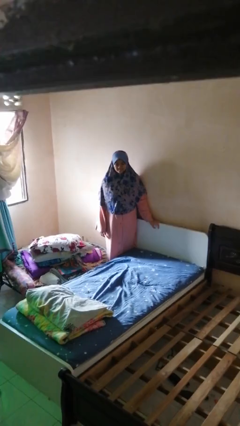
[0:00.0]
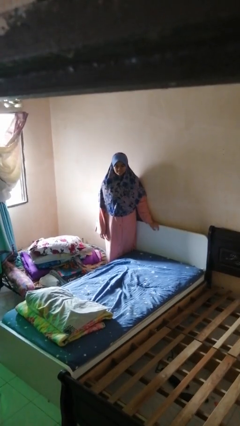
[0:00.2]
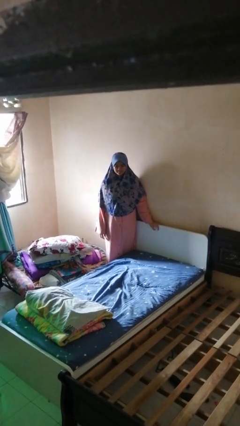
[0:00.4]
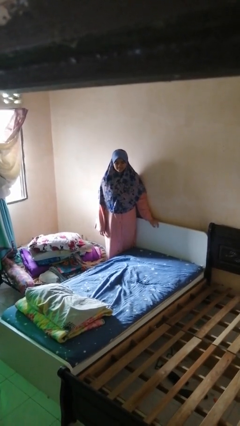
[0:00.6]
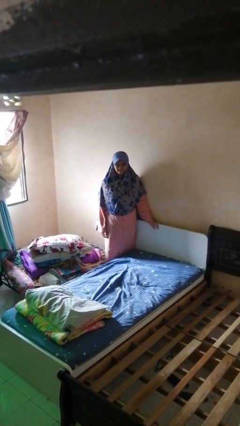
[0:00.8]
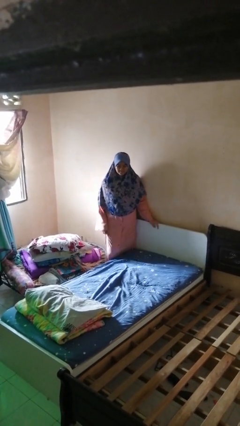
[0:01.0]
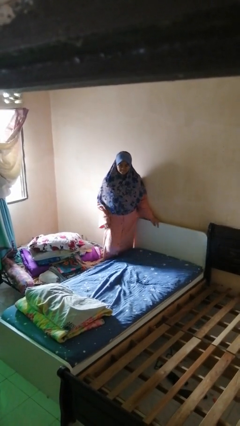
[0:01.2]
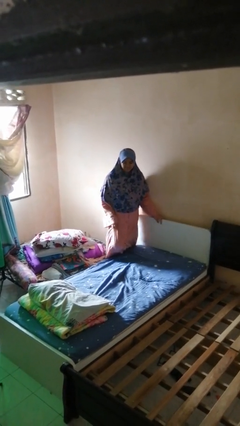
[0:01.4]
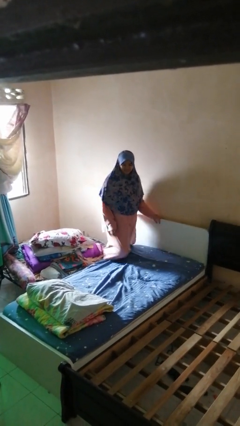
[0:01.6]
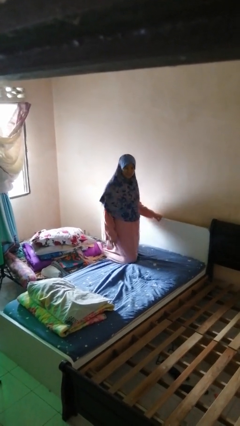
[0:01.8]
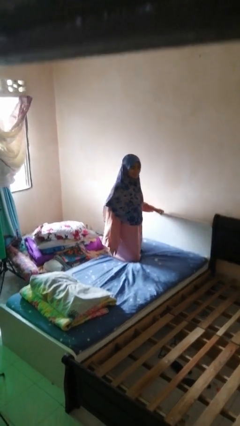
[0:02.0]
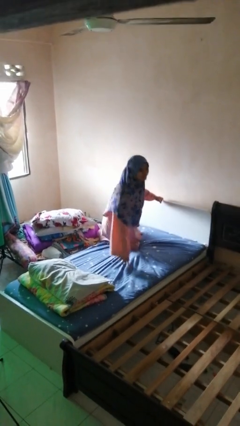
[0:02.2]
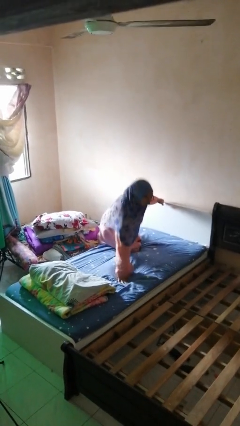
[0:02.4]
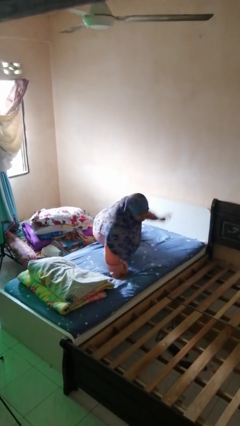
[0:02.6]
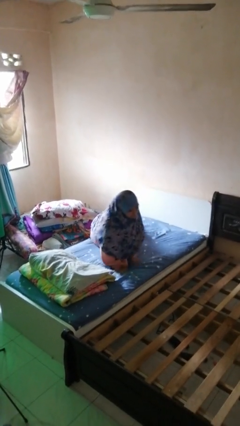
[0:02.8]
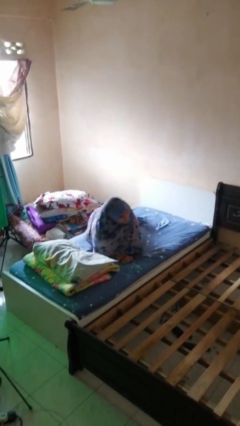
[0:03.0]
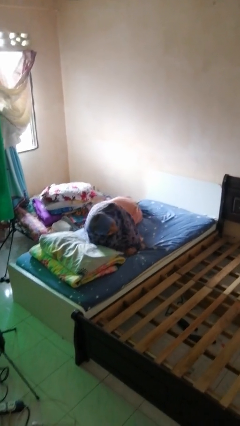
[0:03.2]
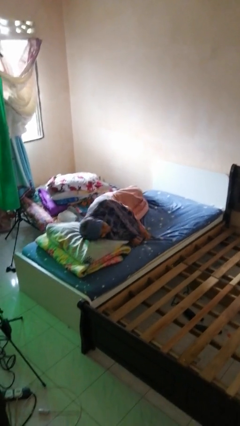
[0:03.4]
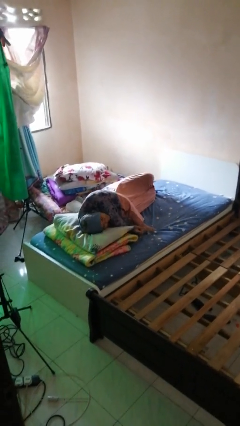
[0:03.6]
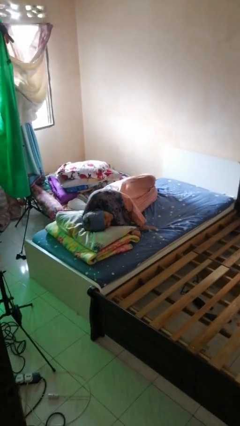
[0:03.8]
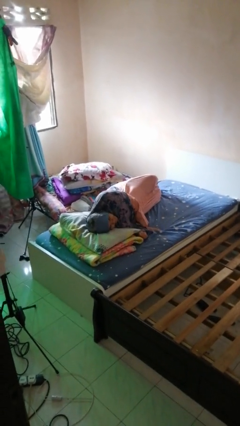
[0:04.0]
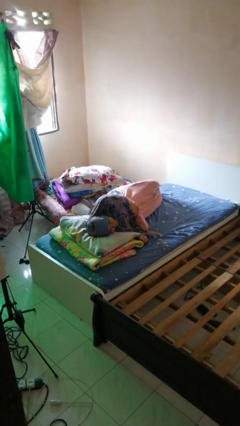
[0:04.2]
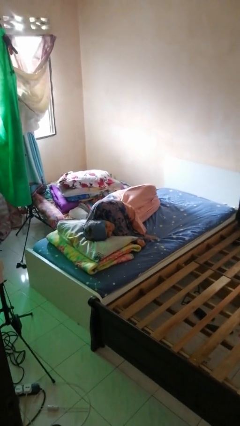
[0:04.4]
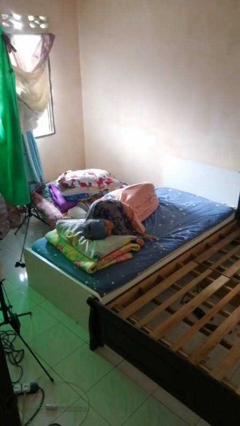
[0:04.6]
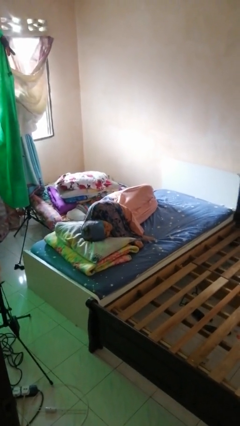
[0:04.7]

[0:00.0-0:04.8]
person lies down on bed

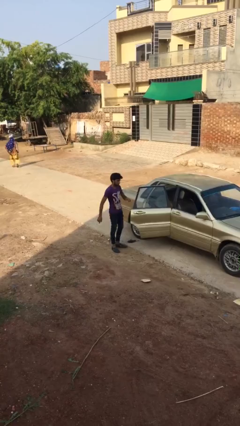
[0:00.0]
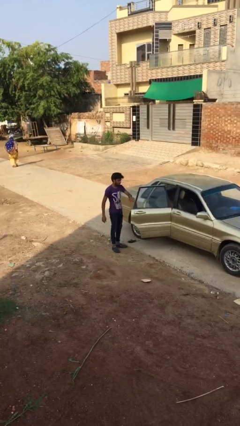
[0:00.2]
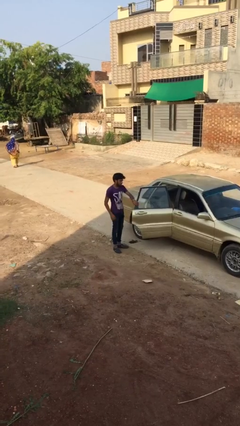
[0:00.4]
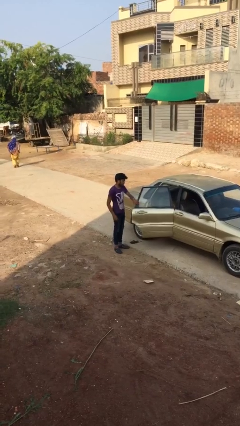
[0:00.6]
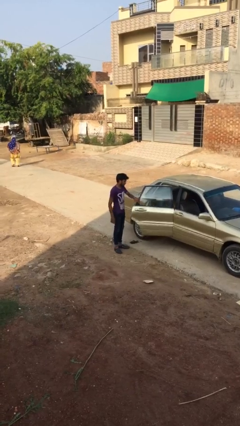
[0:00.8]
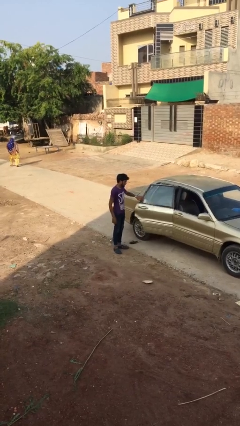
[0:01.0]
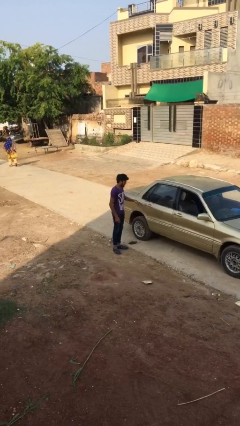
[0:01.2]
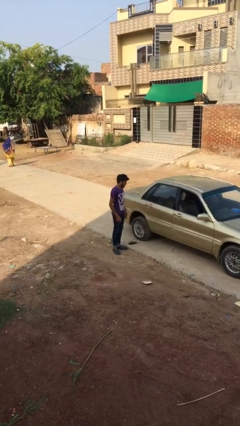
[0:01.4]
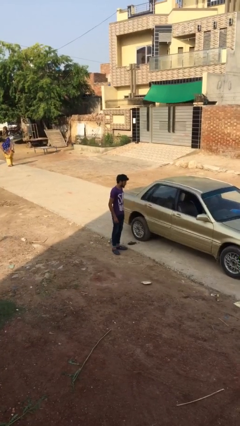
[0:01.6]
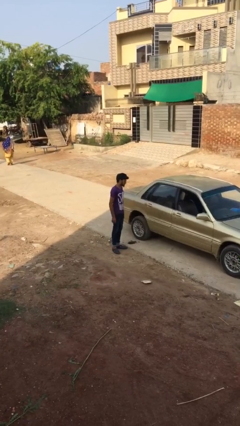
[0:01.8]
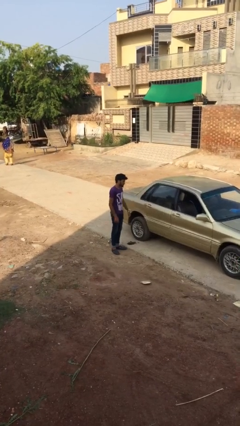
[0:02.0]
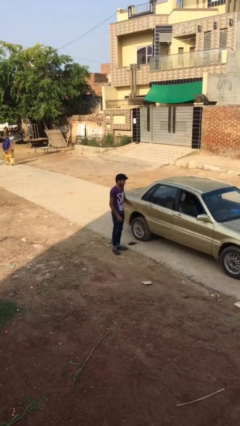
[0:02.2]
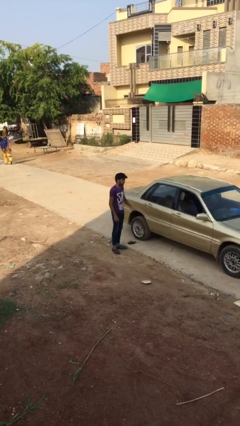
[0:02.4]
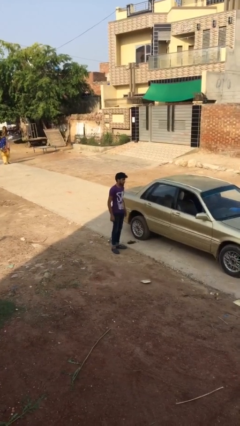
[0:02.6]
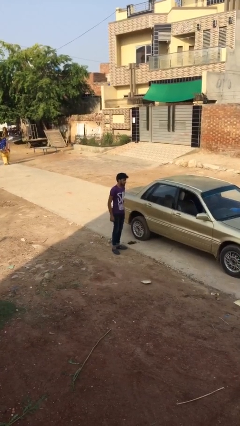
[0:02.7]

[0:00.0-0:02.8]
person closes car door

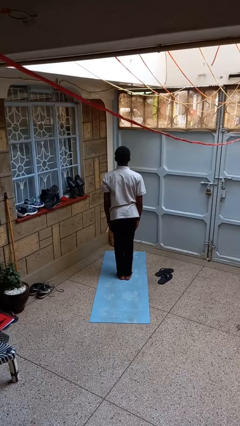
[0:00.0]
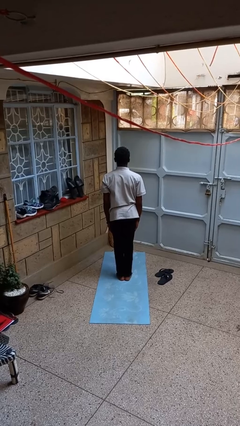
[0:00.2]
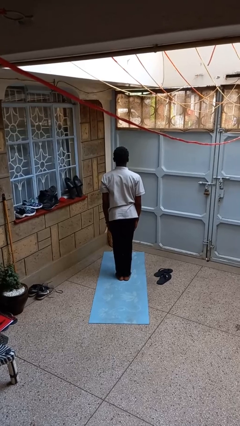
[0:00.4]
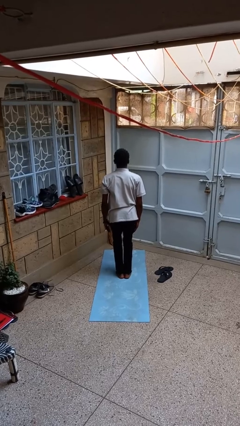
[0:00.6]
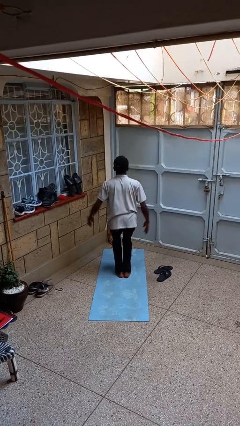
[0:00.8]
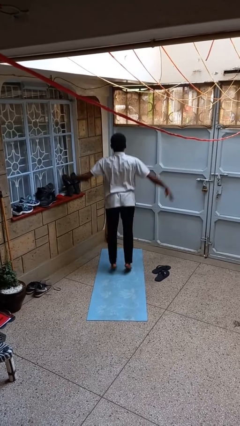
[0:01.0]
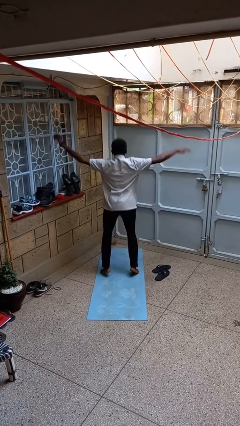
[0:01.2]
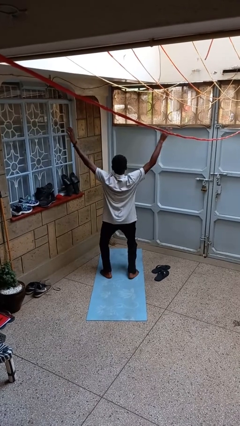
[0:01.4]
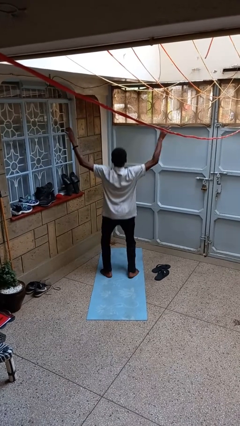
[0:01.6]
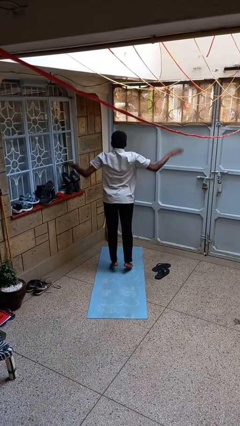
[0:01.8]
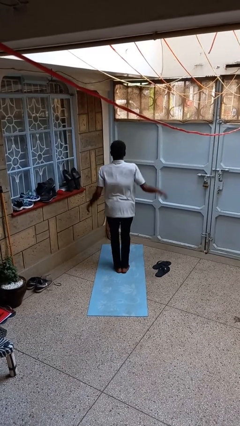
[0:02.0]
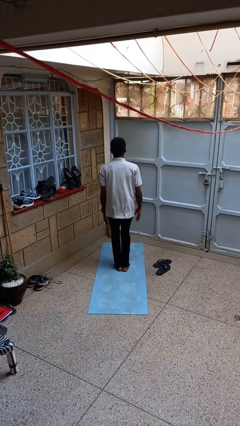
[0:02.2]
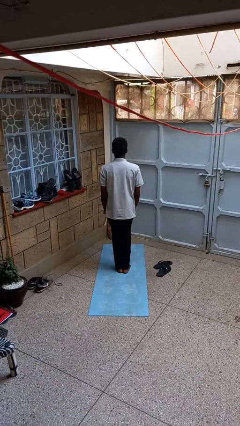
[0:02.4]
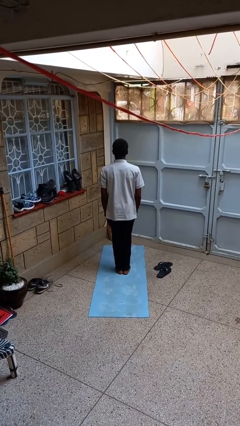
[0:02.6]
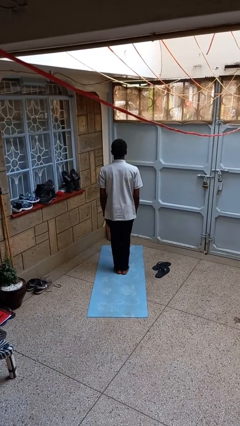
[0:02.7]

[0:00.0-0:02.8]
person exercises with jumping jacks

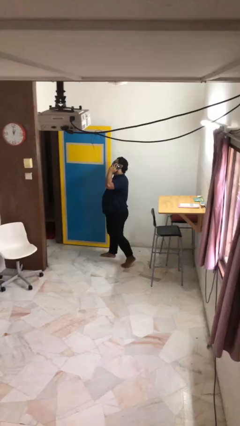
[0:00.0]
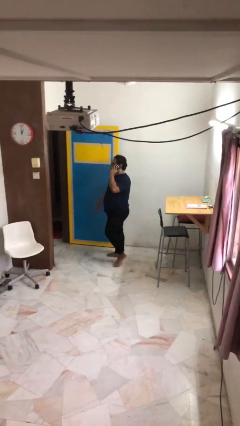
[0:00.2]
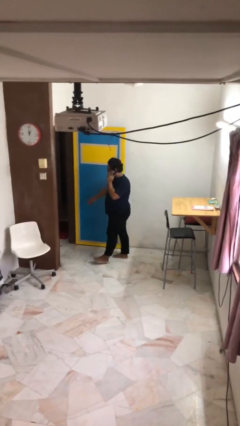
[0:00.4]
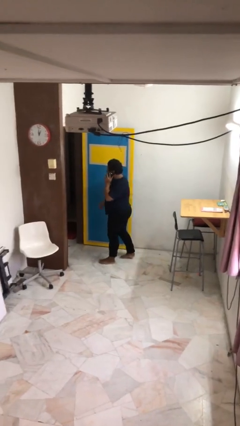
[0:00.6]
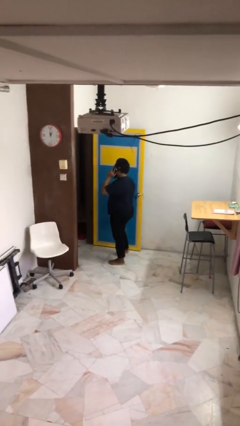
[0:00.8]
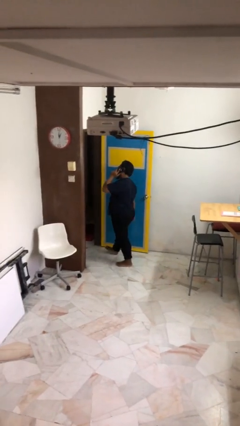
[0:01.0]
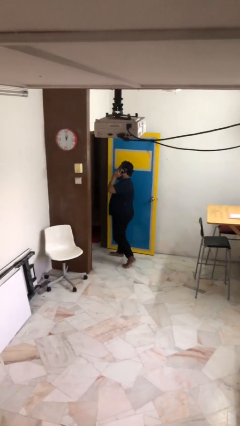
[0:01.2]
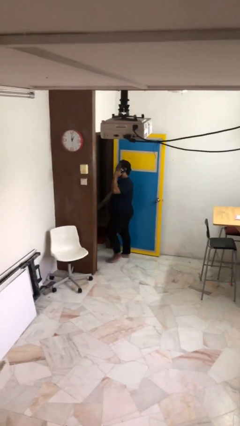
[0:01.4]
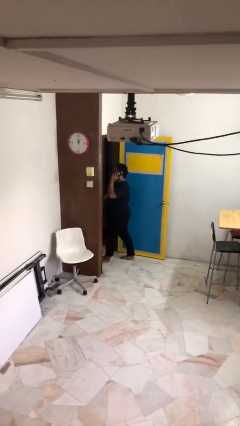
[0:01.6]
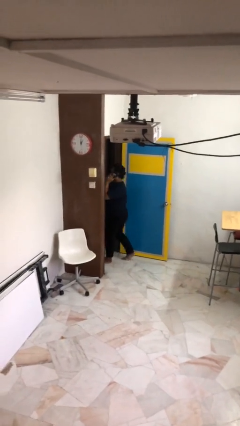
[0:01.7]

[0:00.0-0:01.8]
person exits scene through structure

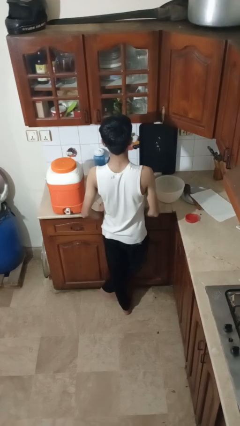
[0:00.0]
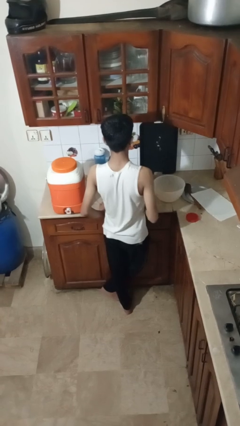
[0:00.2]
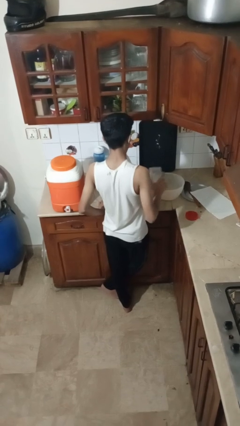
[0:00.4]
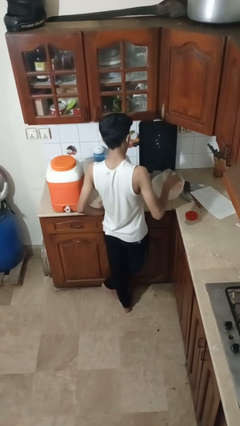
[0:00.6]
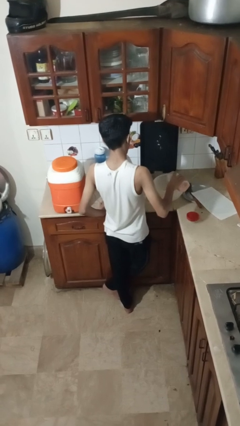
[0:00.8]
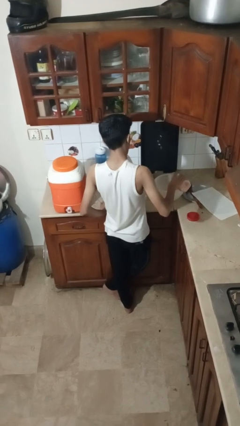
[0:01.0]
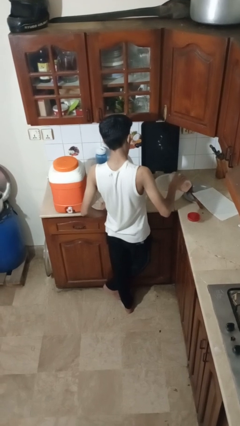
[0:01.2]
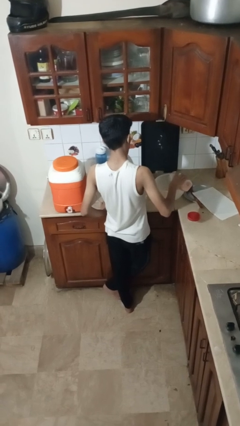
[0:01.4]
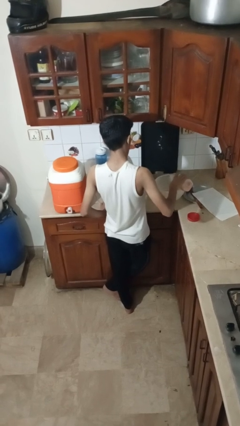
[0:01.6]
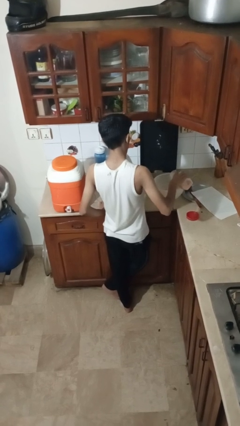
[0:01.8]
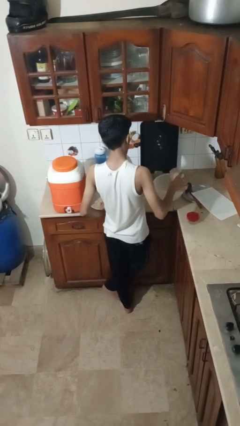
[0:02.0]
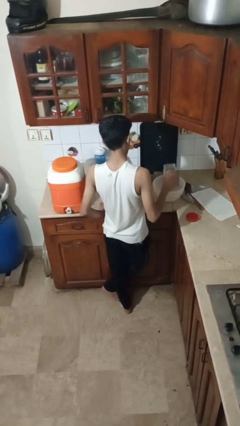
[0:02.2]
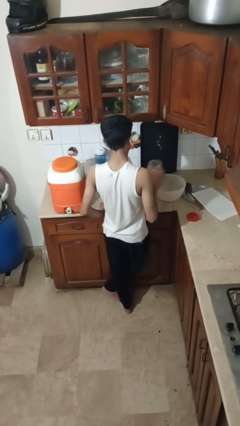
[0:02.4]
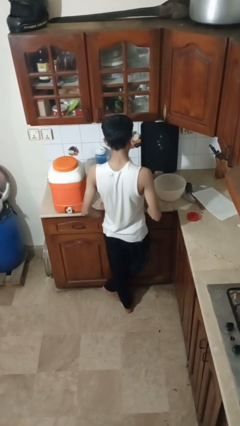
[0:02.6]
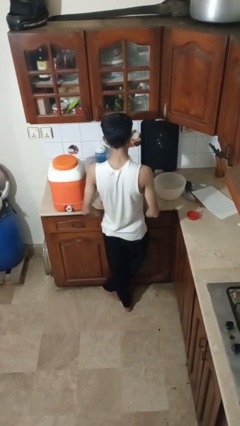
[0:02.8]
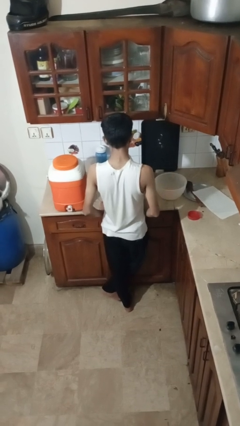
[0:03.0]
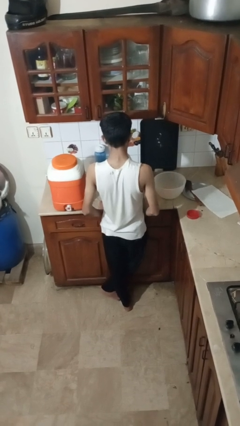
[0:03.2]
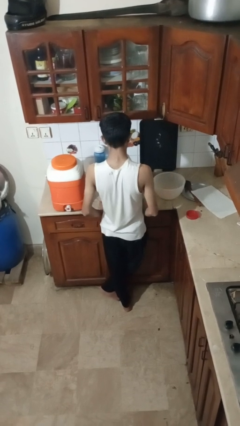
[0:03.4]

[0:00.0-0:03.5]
person pours into bowl

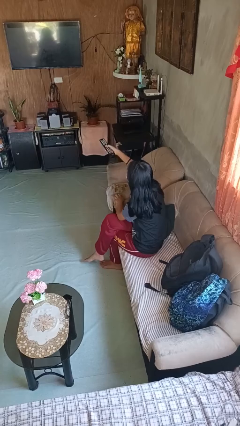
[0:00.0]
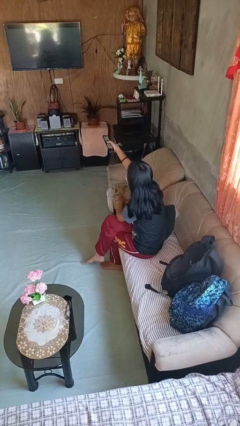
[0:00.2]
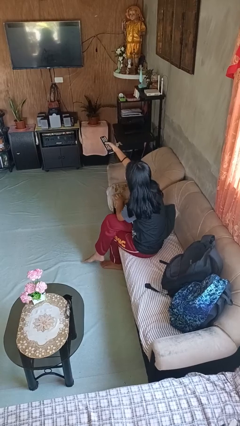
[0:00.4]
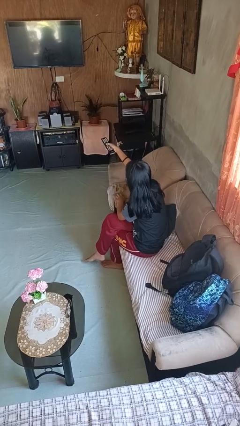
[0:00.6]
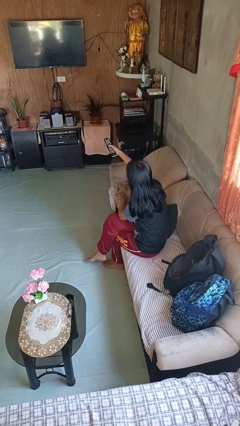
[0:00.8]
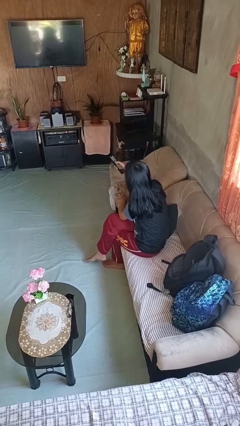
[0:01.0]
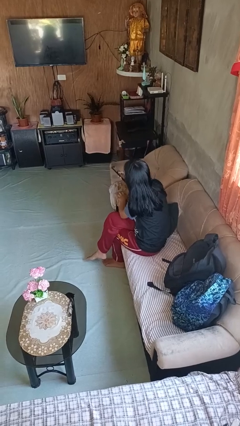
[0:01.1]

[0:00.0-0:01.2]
person uses television remote

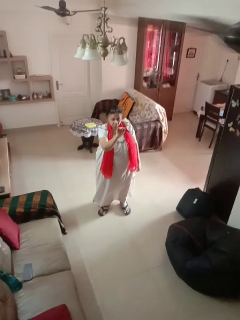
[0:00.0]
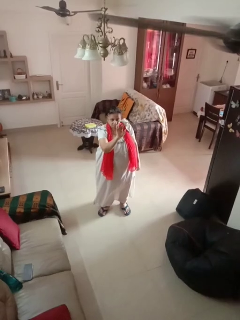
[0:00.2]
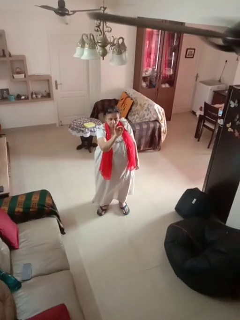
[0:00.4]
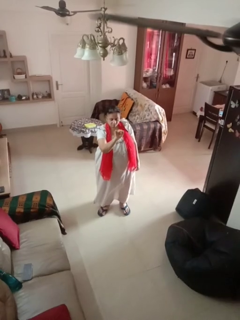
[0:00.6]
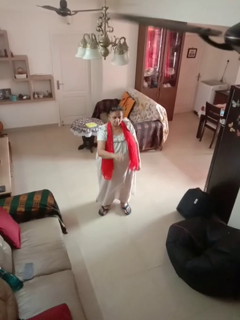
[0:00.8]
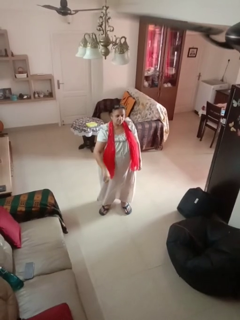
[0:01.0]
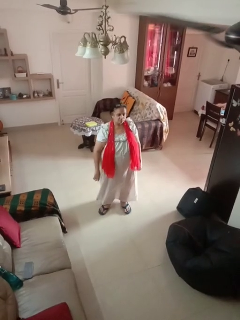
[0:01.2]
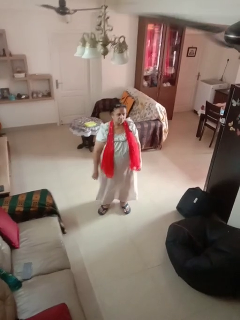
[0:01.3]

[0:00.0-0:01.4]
person gestures come here
